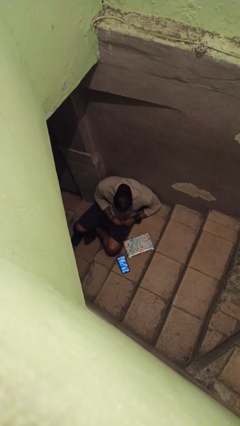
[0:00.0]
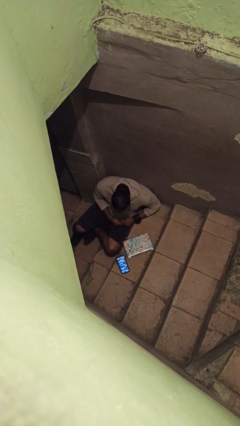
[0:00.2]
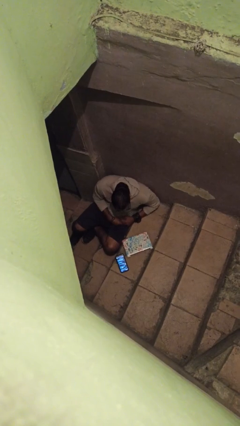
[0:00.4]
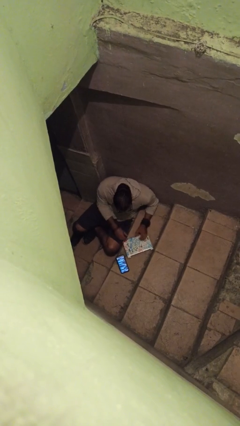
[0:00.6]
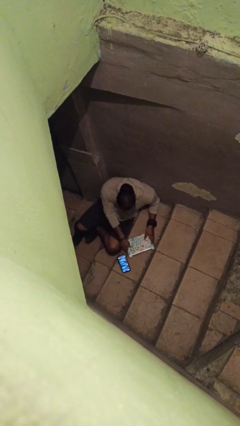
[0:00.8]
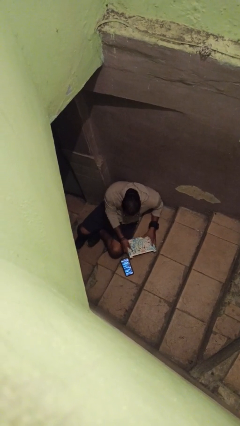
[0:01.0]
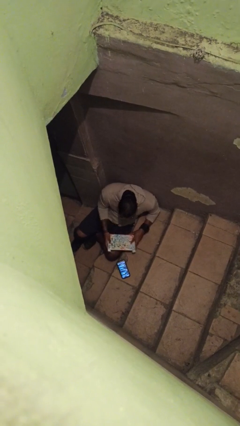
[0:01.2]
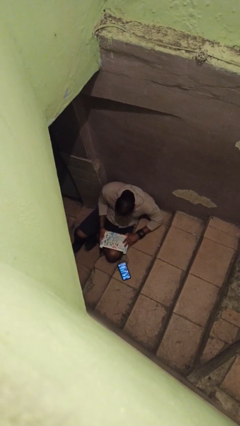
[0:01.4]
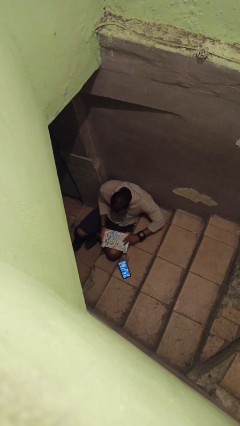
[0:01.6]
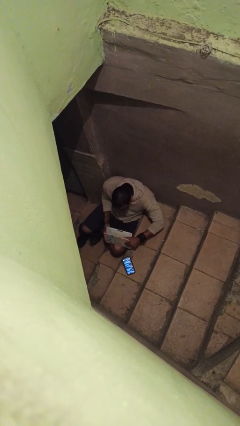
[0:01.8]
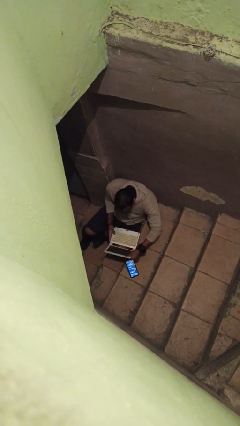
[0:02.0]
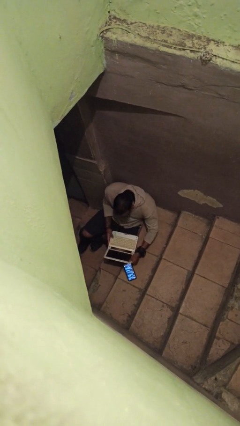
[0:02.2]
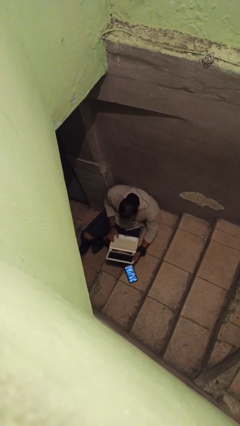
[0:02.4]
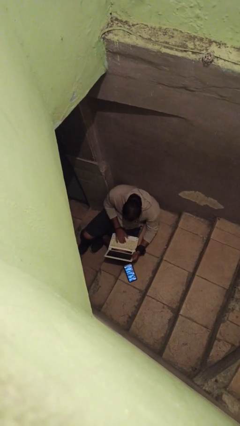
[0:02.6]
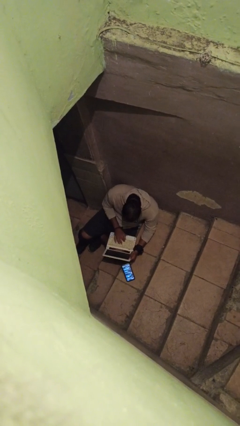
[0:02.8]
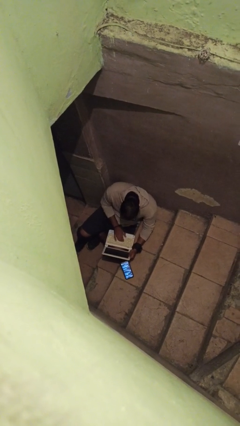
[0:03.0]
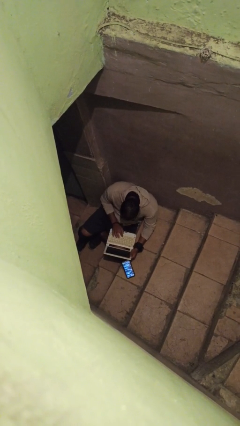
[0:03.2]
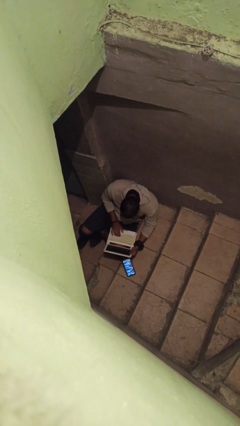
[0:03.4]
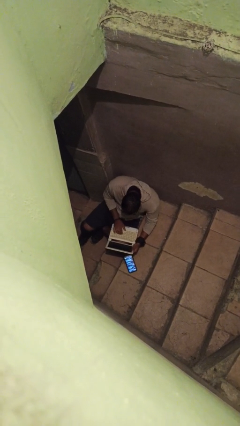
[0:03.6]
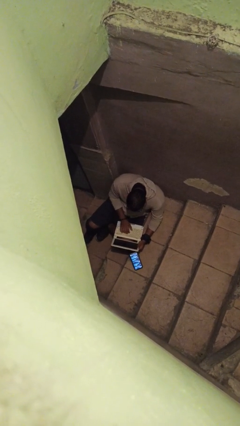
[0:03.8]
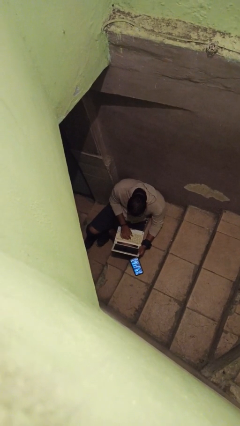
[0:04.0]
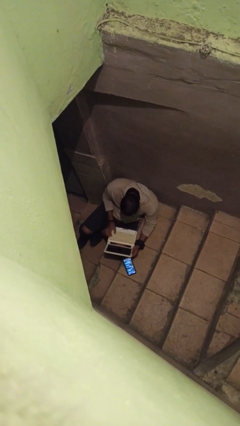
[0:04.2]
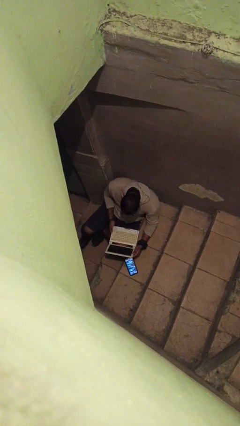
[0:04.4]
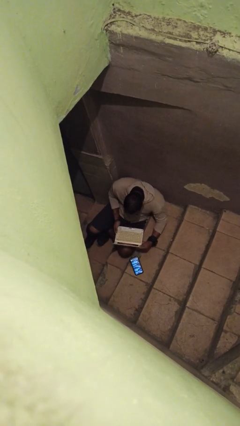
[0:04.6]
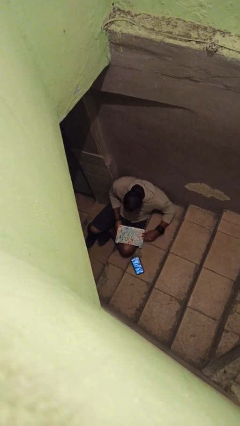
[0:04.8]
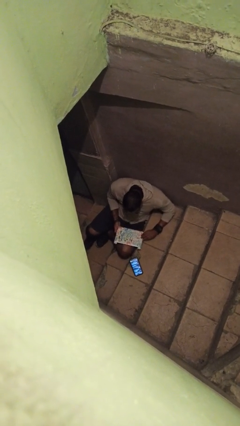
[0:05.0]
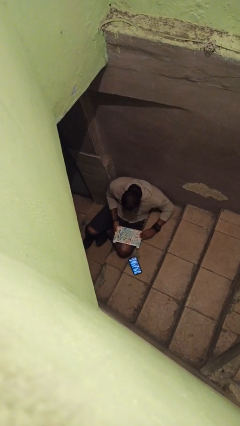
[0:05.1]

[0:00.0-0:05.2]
person interacts with laptop

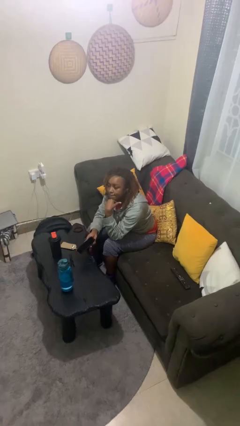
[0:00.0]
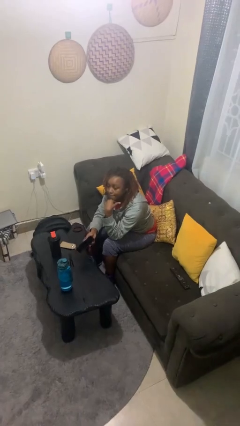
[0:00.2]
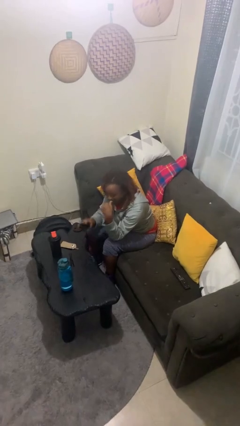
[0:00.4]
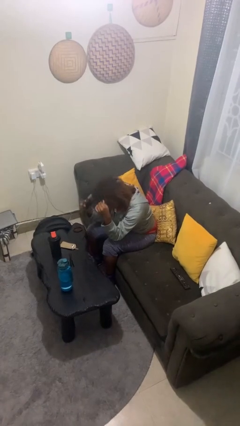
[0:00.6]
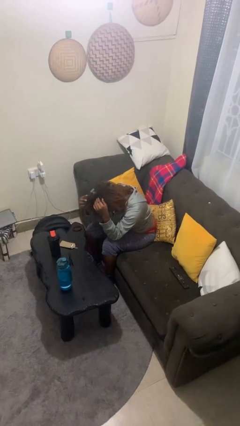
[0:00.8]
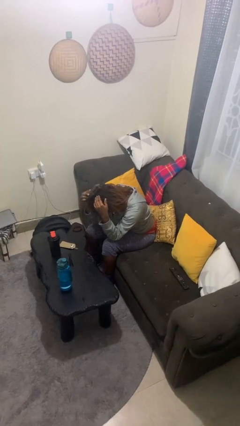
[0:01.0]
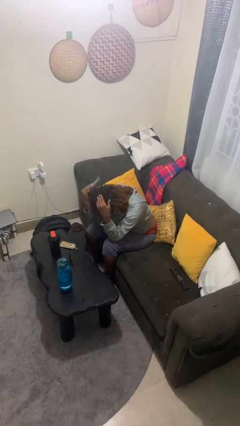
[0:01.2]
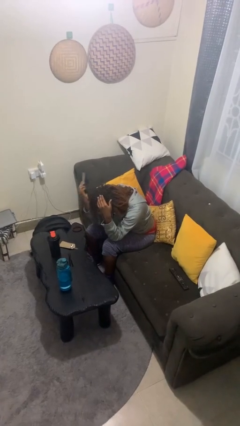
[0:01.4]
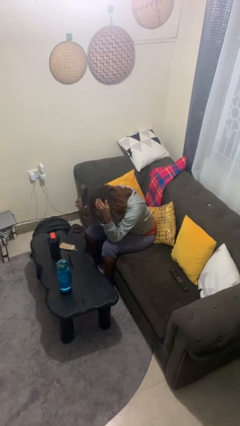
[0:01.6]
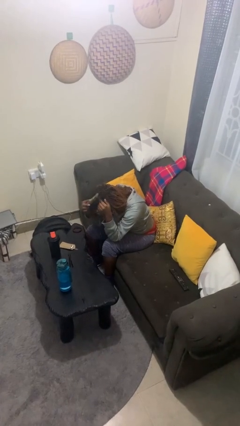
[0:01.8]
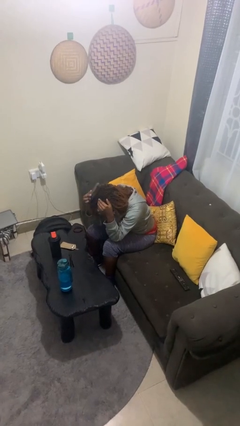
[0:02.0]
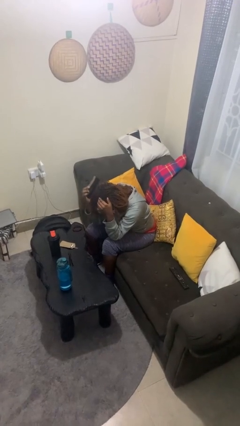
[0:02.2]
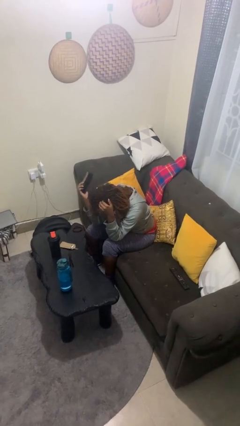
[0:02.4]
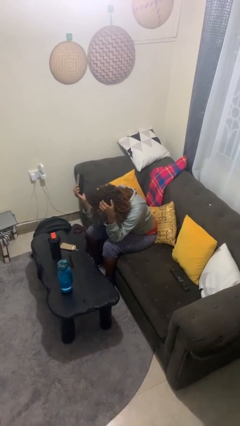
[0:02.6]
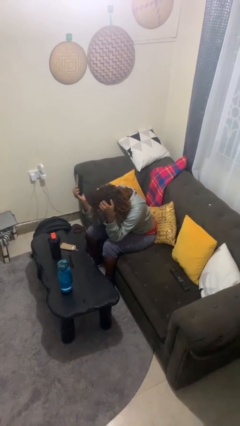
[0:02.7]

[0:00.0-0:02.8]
person brushes hair

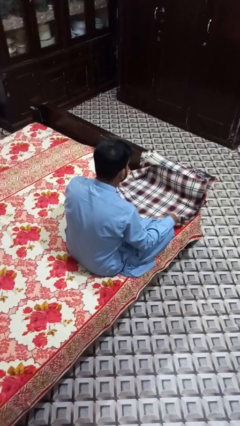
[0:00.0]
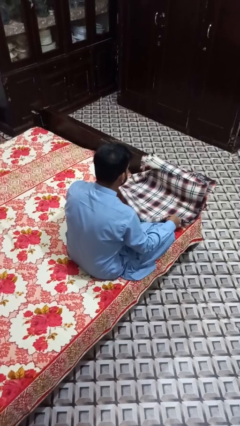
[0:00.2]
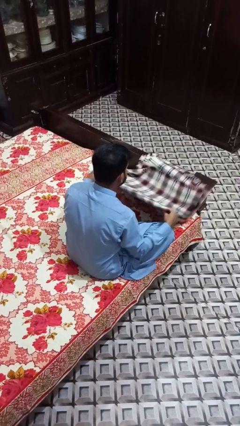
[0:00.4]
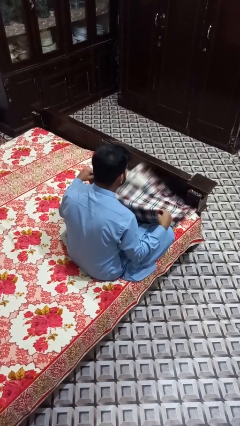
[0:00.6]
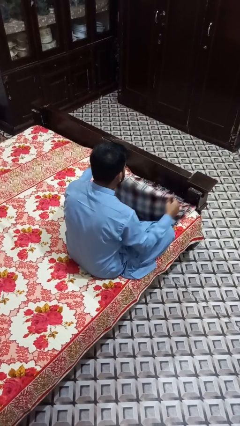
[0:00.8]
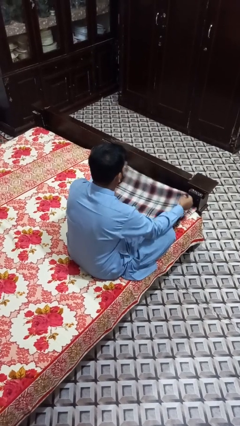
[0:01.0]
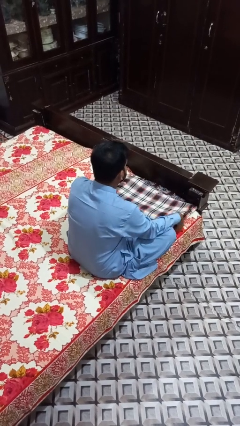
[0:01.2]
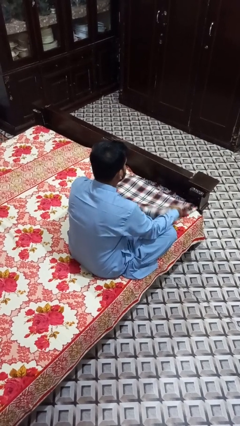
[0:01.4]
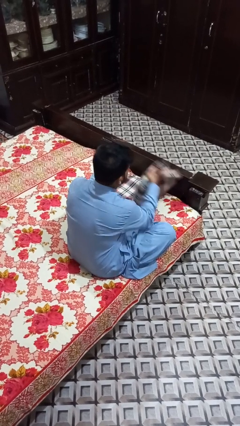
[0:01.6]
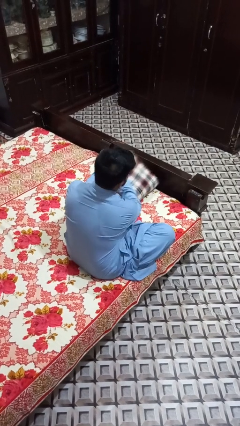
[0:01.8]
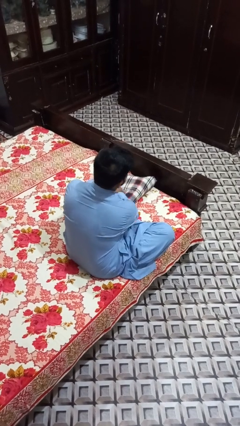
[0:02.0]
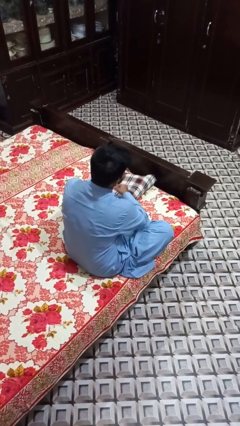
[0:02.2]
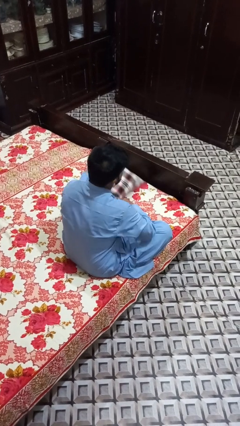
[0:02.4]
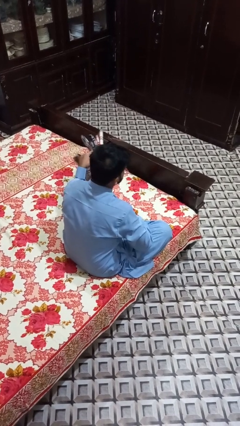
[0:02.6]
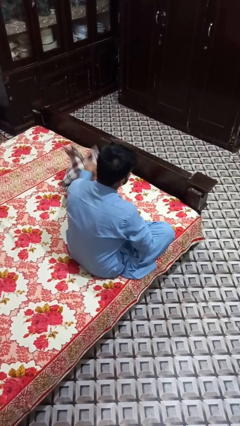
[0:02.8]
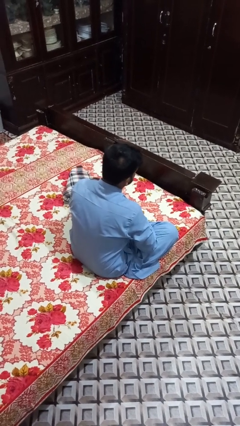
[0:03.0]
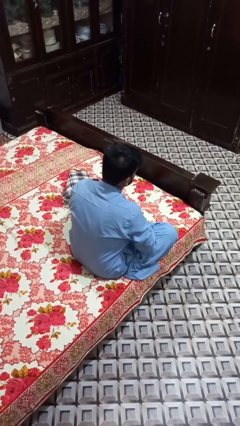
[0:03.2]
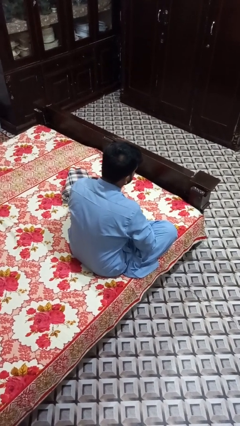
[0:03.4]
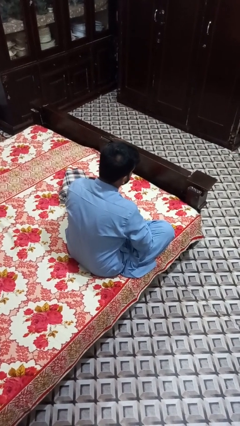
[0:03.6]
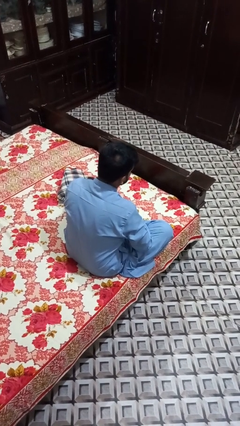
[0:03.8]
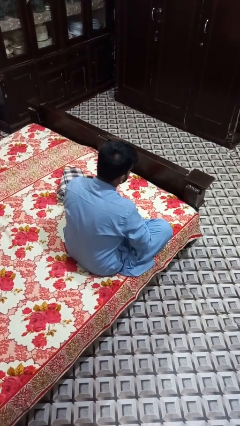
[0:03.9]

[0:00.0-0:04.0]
person folds blanket

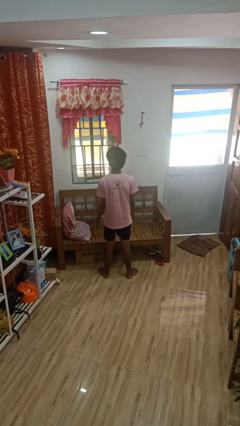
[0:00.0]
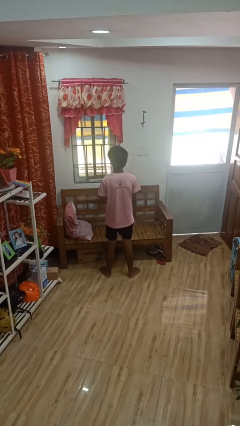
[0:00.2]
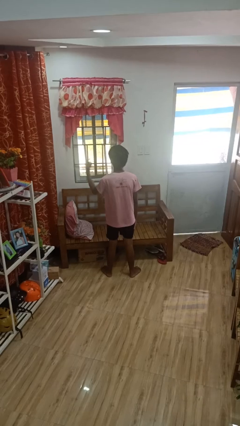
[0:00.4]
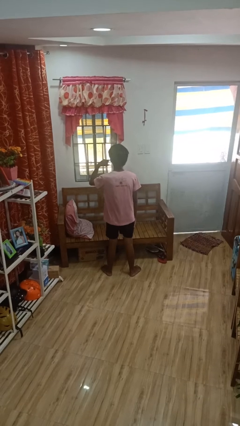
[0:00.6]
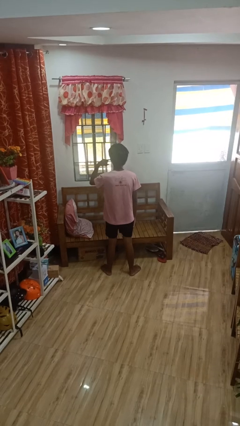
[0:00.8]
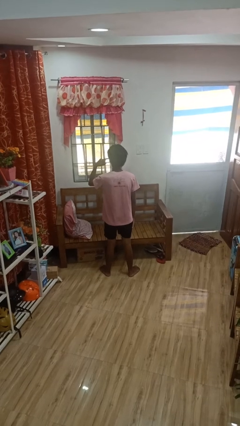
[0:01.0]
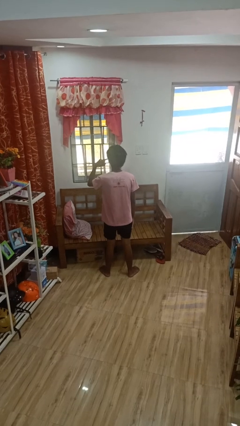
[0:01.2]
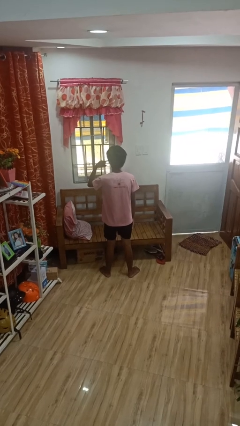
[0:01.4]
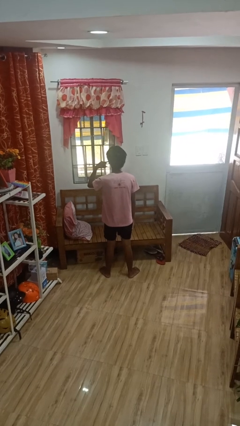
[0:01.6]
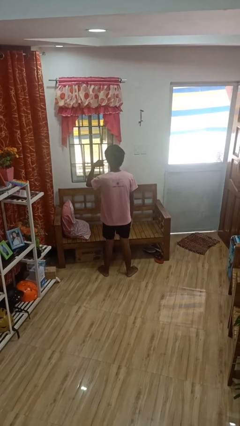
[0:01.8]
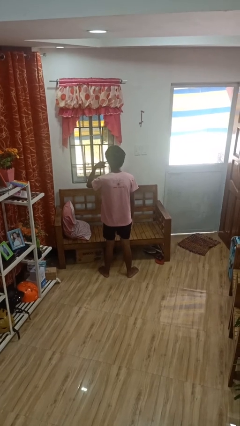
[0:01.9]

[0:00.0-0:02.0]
person gestures listen closely

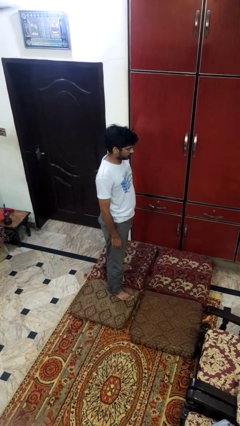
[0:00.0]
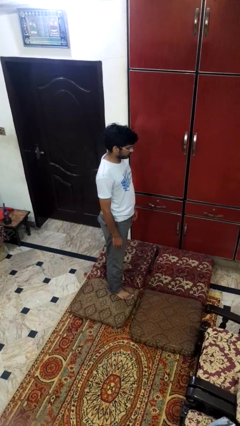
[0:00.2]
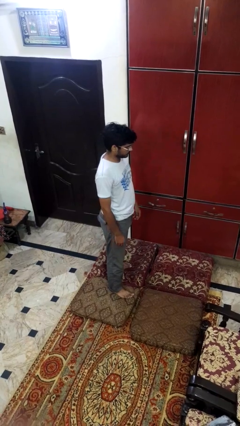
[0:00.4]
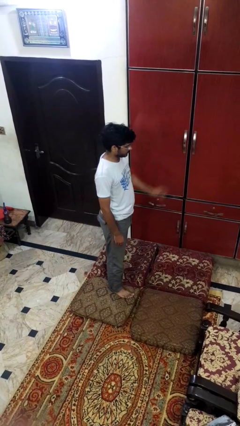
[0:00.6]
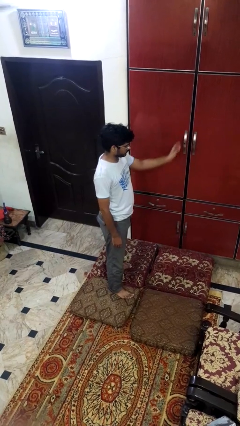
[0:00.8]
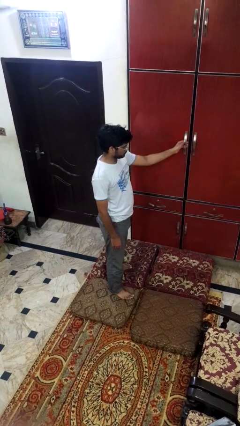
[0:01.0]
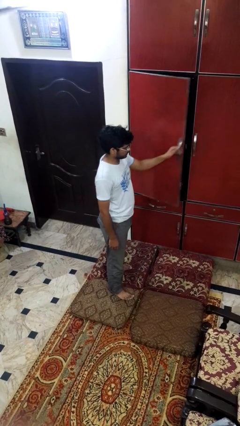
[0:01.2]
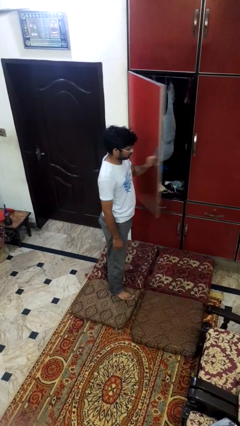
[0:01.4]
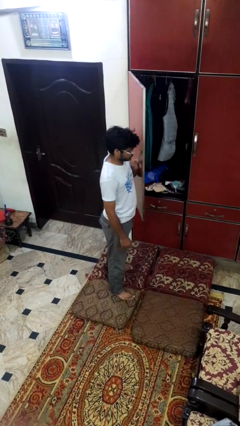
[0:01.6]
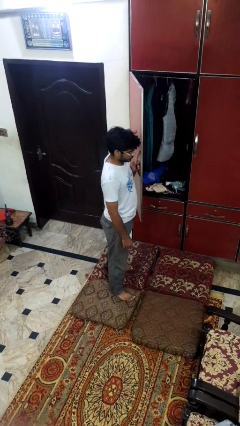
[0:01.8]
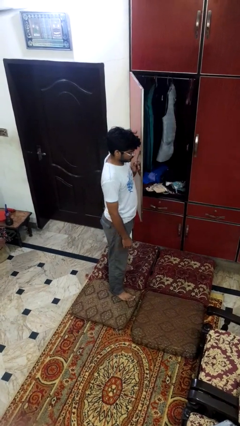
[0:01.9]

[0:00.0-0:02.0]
person opens closet door

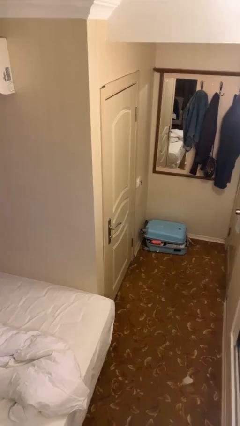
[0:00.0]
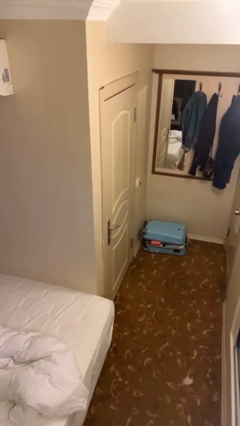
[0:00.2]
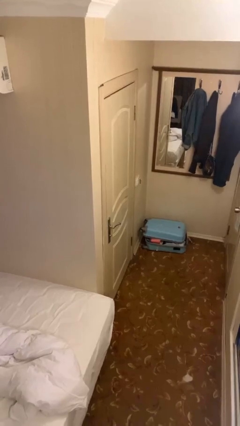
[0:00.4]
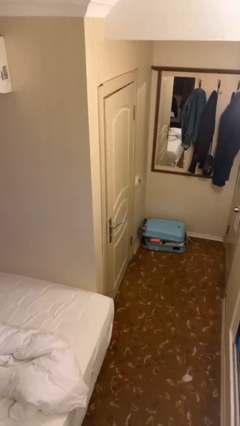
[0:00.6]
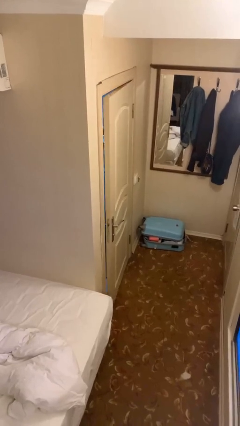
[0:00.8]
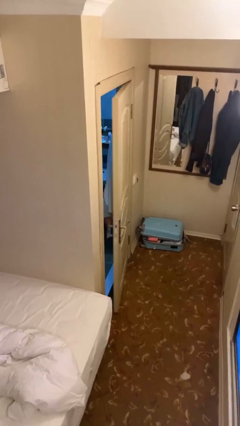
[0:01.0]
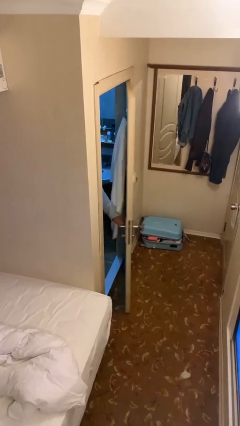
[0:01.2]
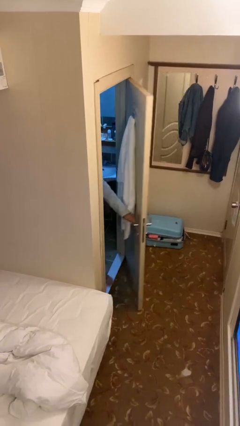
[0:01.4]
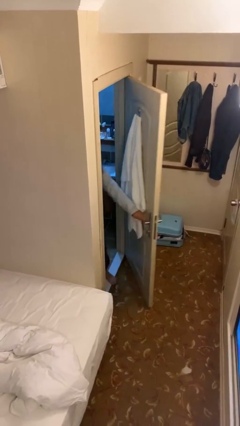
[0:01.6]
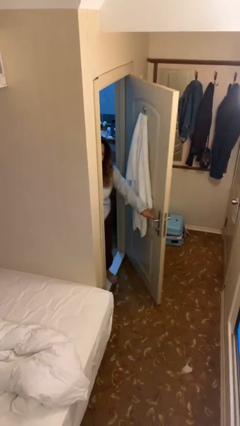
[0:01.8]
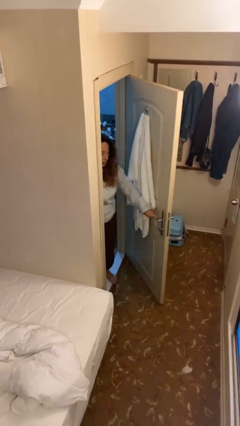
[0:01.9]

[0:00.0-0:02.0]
person opens facility door
